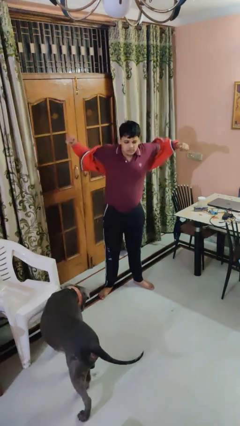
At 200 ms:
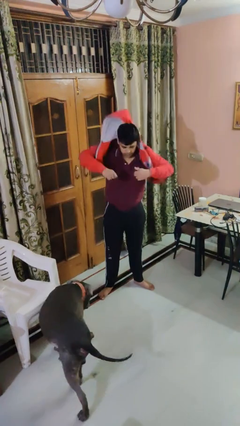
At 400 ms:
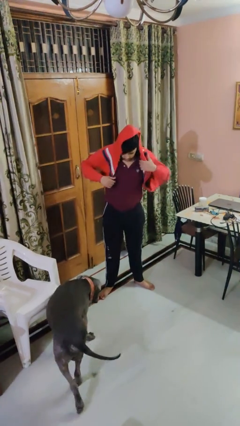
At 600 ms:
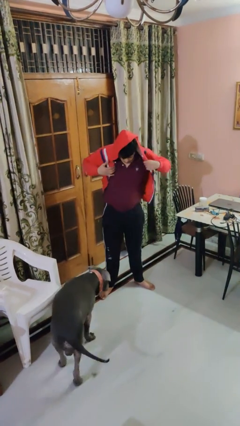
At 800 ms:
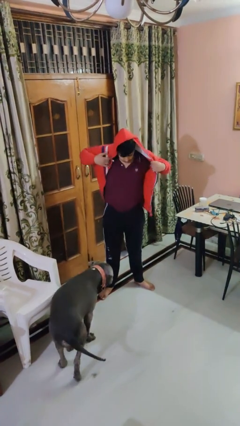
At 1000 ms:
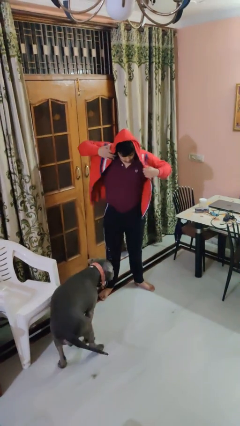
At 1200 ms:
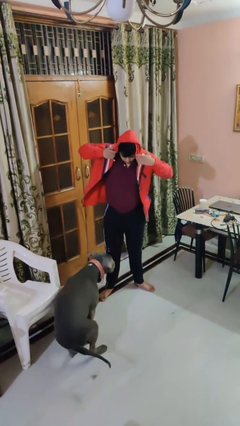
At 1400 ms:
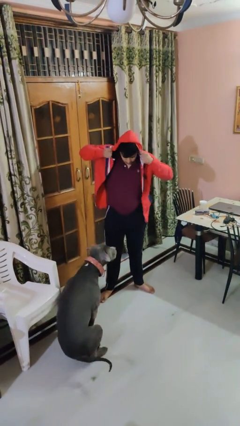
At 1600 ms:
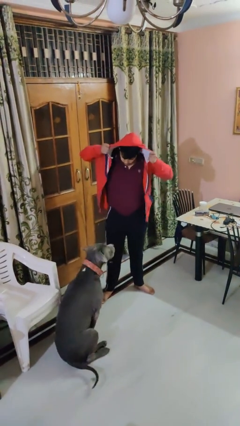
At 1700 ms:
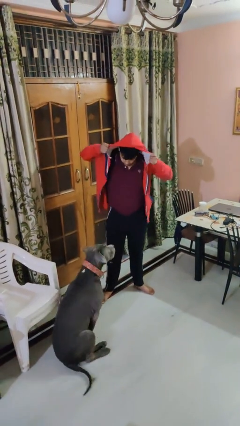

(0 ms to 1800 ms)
person puts on hoodie

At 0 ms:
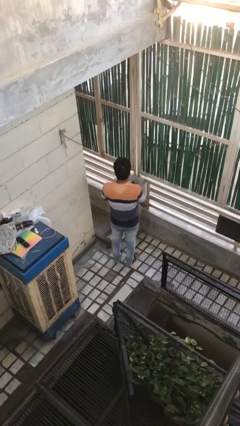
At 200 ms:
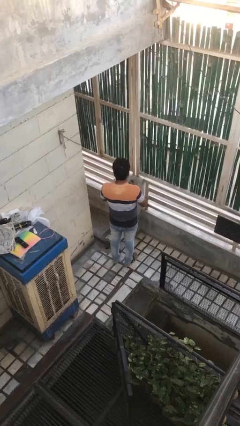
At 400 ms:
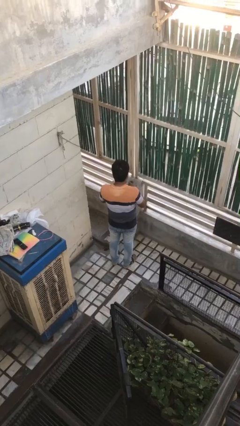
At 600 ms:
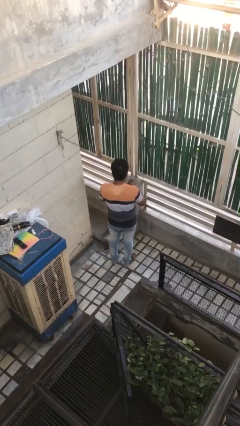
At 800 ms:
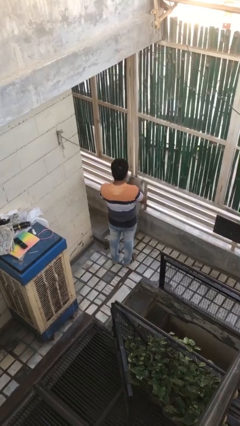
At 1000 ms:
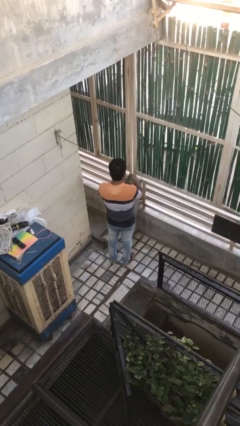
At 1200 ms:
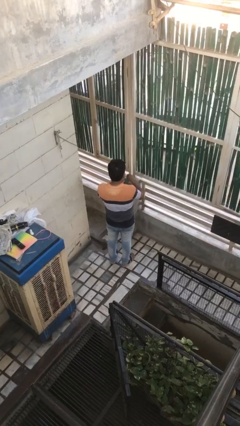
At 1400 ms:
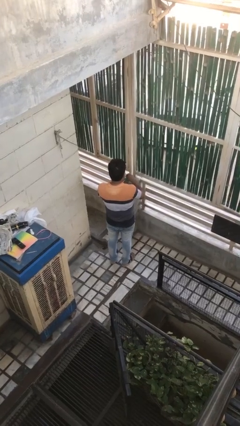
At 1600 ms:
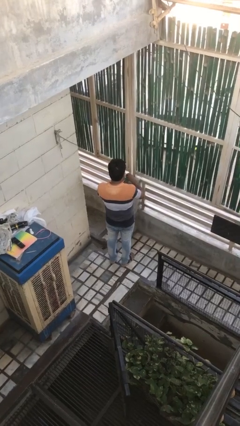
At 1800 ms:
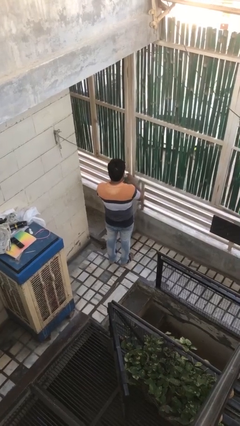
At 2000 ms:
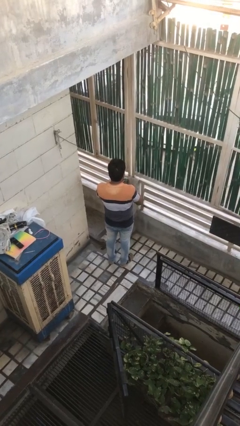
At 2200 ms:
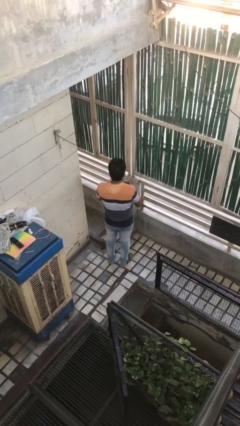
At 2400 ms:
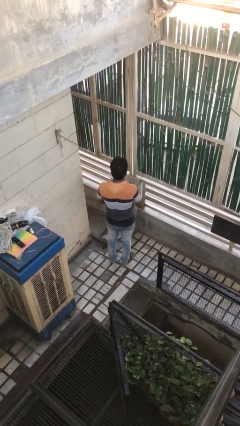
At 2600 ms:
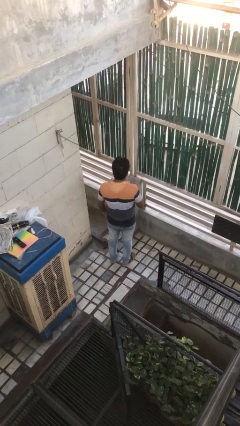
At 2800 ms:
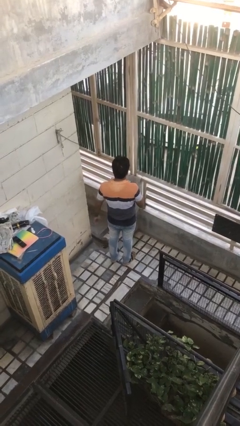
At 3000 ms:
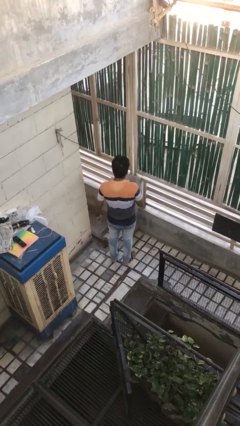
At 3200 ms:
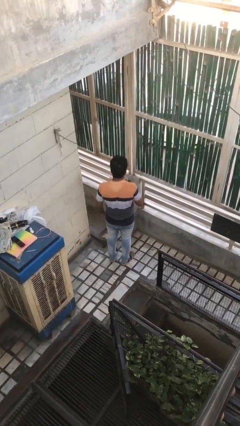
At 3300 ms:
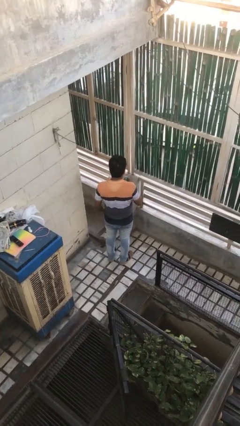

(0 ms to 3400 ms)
person opens beverage can

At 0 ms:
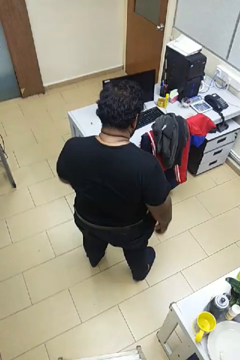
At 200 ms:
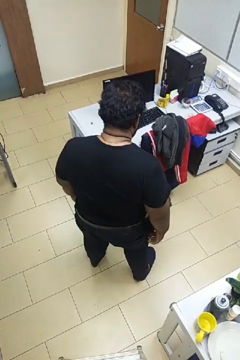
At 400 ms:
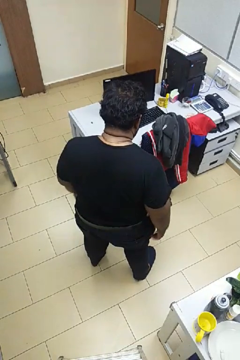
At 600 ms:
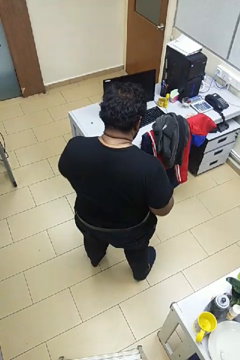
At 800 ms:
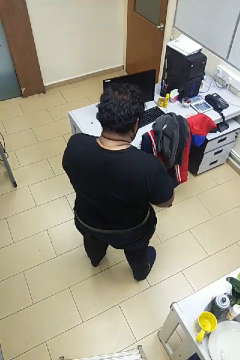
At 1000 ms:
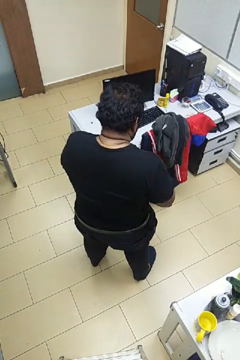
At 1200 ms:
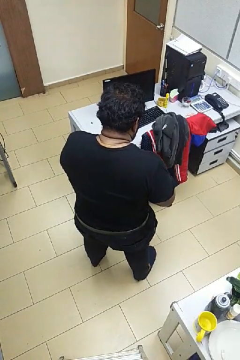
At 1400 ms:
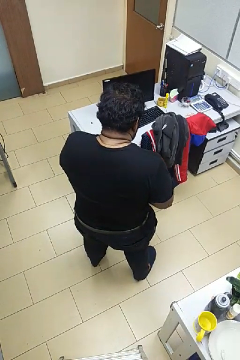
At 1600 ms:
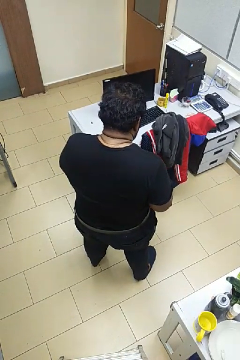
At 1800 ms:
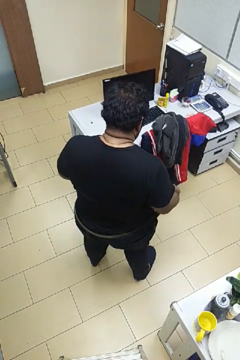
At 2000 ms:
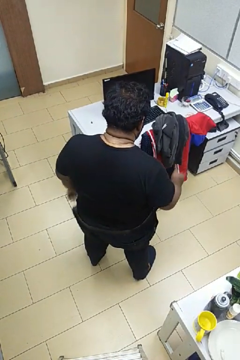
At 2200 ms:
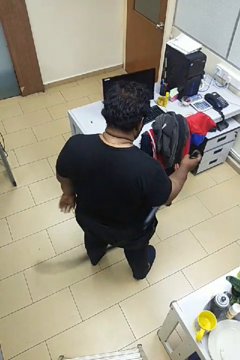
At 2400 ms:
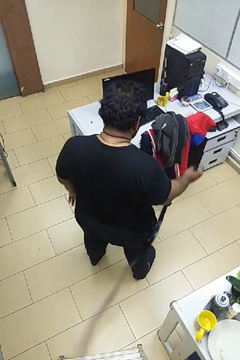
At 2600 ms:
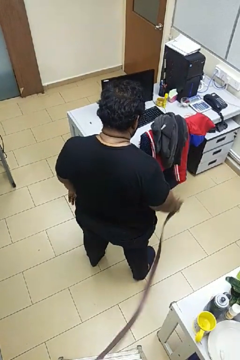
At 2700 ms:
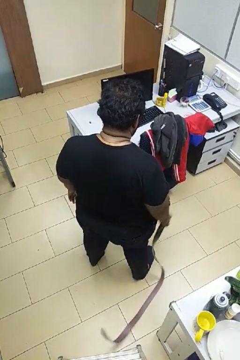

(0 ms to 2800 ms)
person takes off belt

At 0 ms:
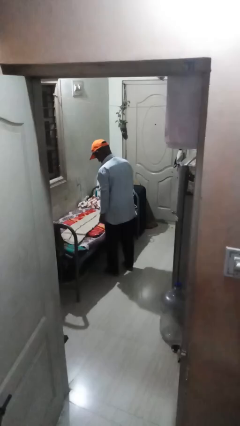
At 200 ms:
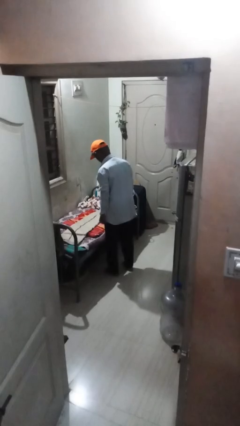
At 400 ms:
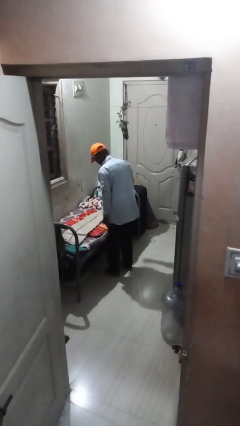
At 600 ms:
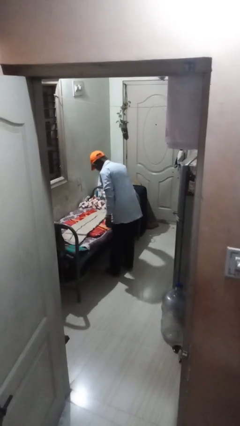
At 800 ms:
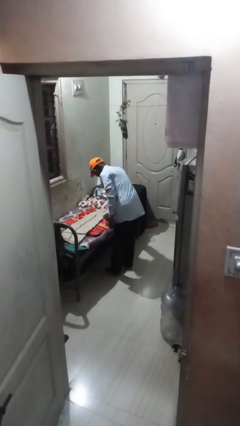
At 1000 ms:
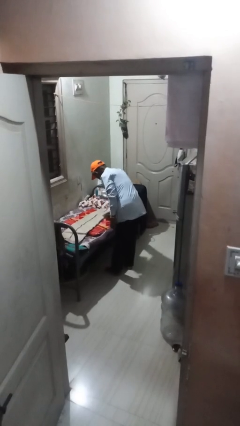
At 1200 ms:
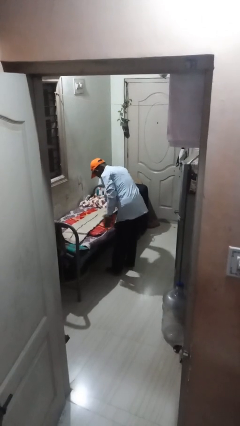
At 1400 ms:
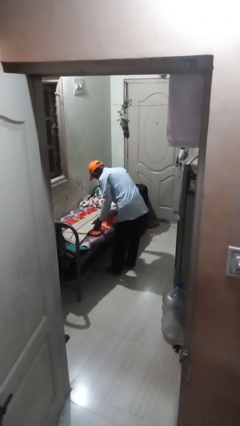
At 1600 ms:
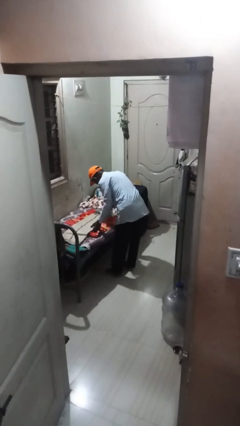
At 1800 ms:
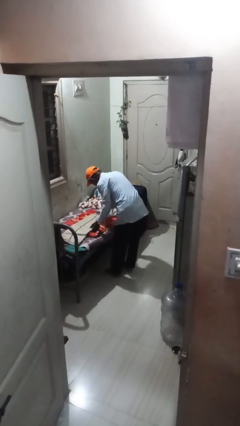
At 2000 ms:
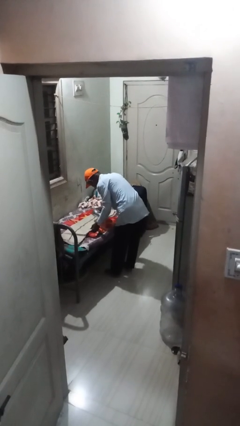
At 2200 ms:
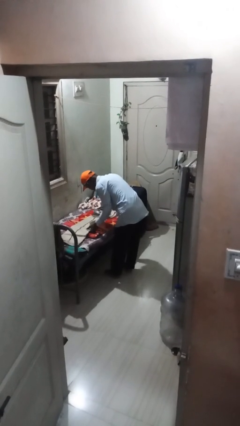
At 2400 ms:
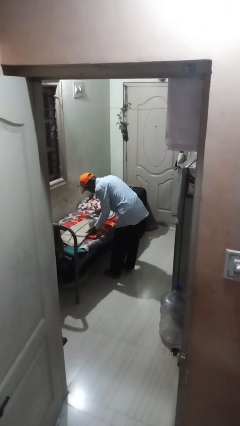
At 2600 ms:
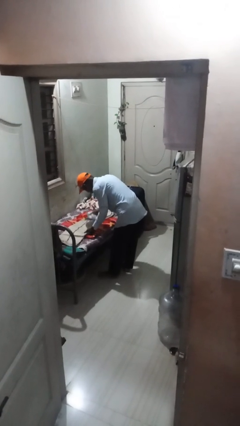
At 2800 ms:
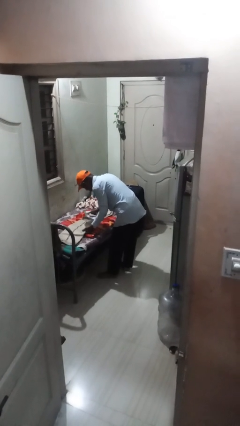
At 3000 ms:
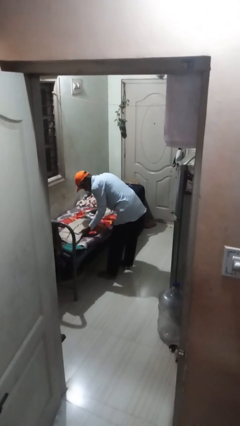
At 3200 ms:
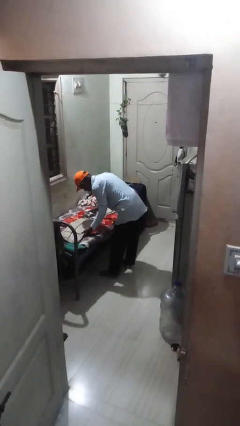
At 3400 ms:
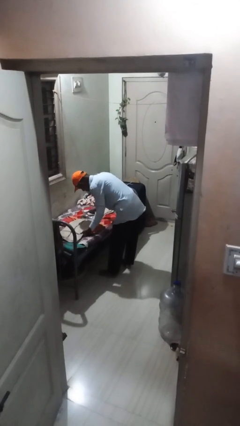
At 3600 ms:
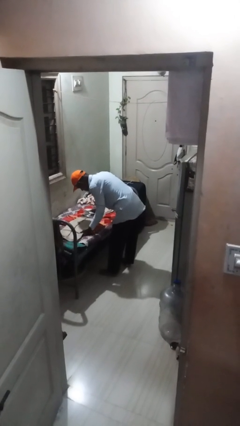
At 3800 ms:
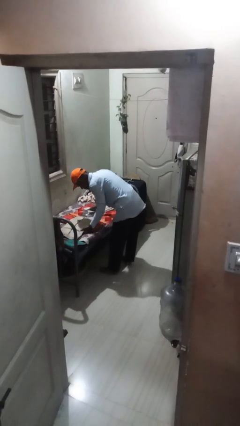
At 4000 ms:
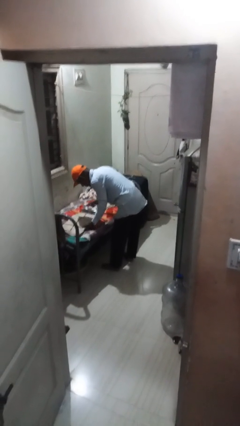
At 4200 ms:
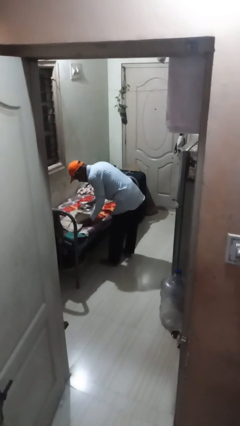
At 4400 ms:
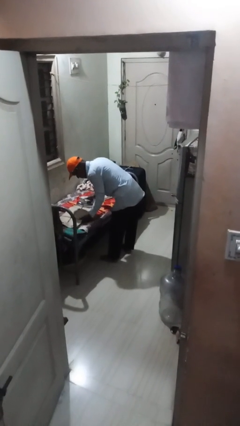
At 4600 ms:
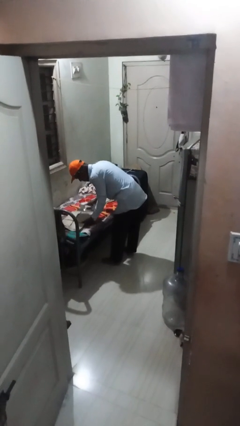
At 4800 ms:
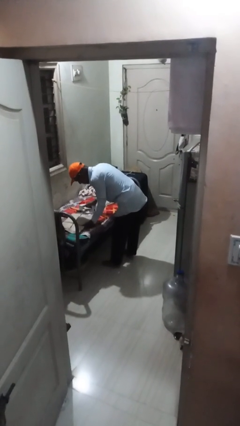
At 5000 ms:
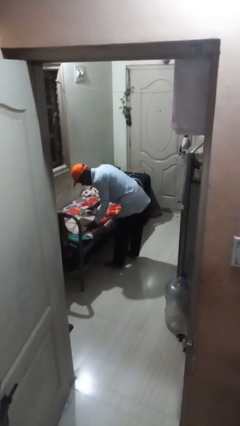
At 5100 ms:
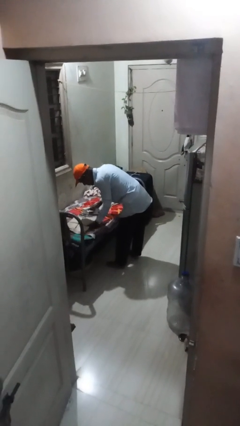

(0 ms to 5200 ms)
person irons clothes

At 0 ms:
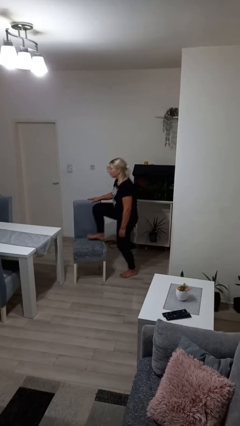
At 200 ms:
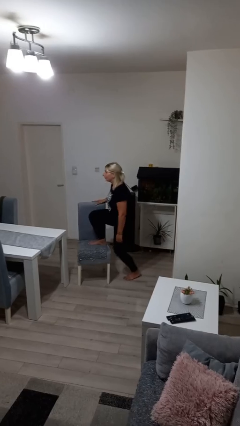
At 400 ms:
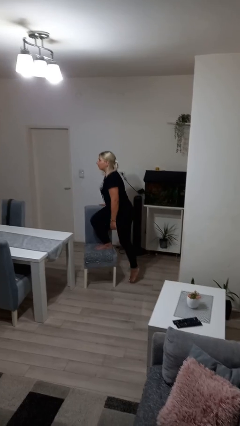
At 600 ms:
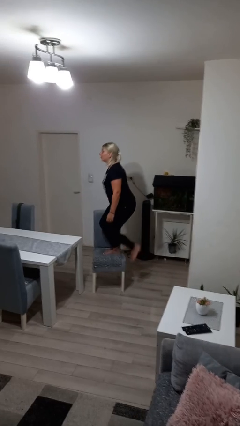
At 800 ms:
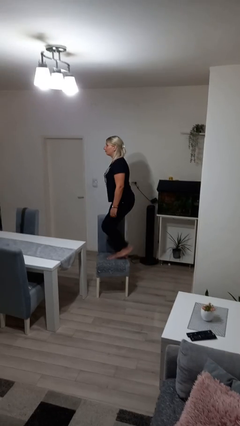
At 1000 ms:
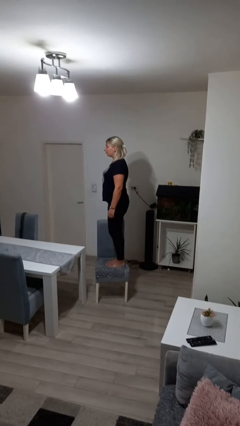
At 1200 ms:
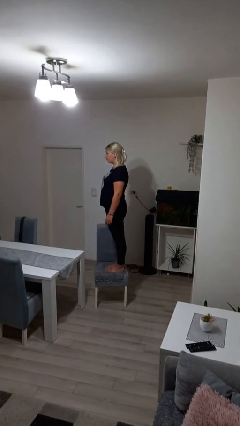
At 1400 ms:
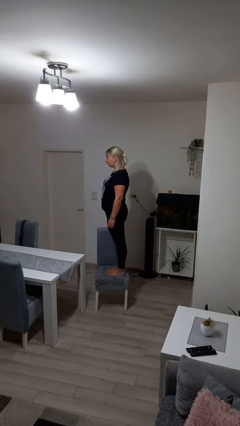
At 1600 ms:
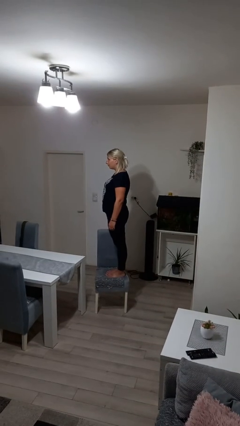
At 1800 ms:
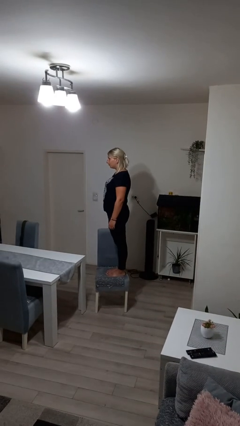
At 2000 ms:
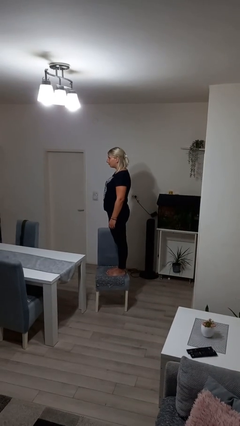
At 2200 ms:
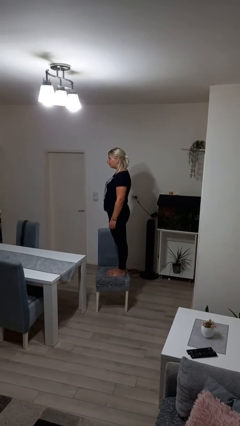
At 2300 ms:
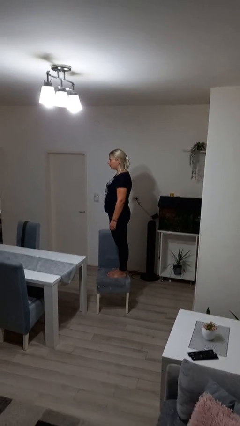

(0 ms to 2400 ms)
person climbs on chair

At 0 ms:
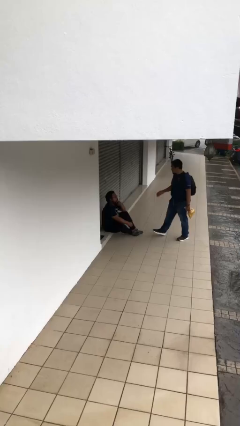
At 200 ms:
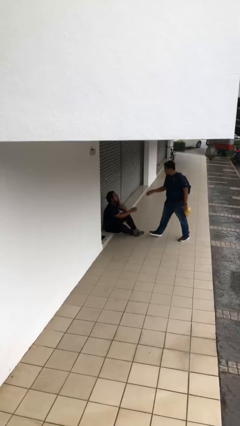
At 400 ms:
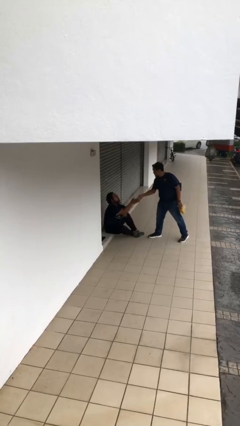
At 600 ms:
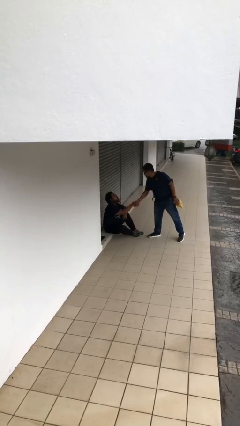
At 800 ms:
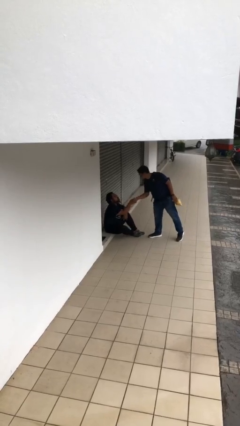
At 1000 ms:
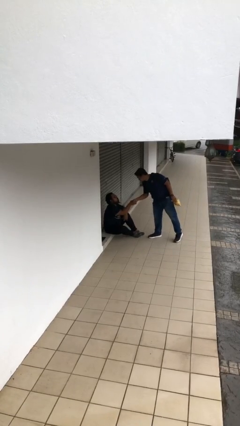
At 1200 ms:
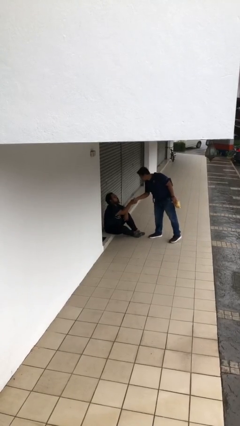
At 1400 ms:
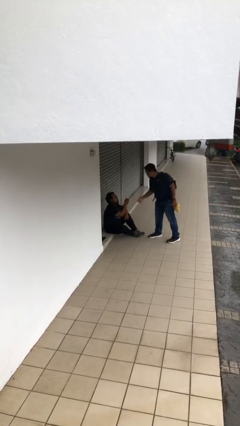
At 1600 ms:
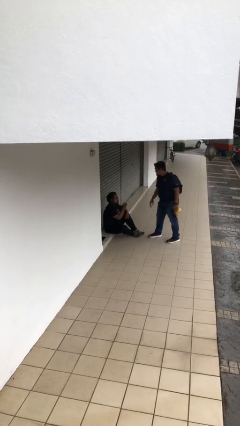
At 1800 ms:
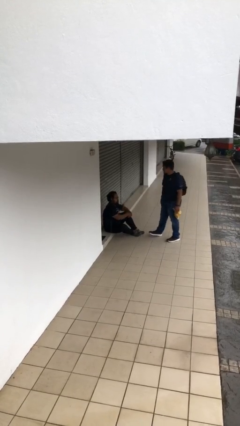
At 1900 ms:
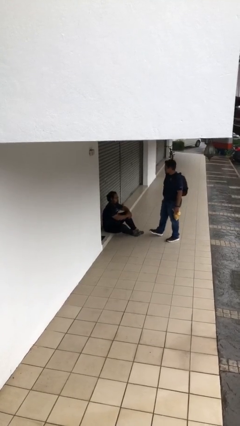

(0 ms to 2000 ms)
person shakes hand
